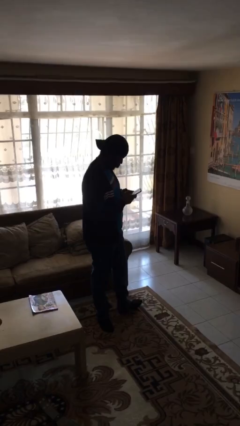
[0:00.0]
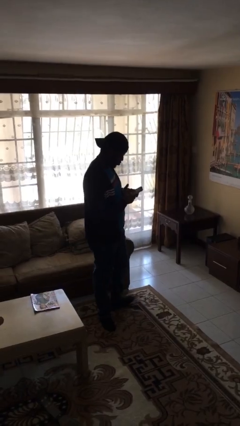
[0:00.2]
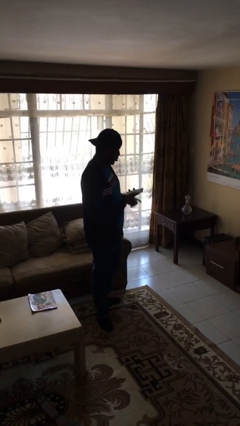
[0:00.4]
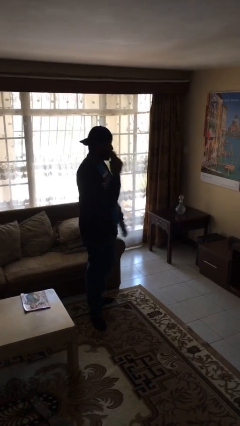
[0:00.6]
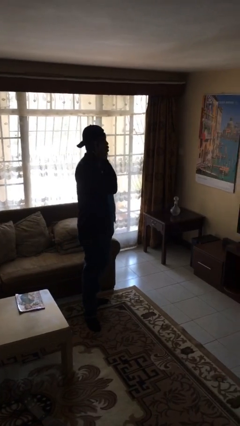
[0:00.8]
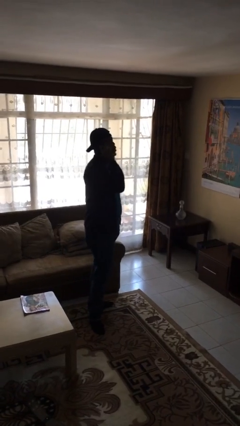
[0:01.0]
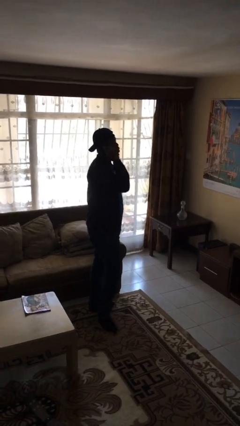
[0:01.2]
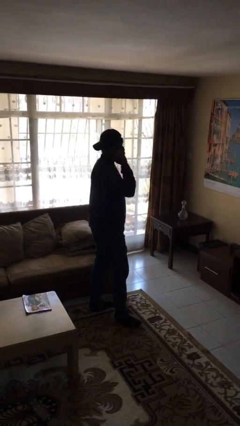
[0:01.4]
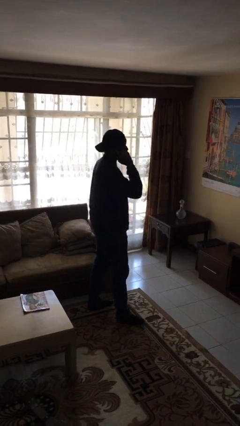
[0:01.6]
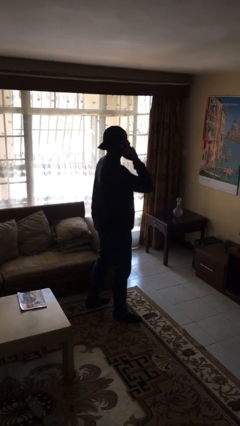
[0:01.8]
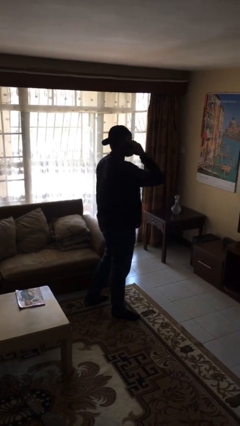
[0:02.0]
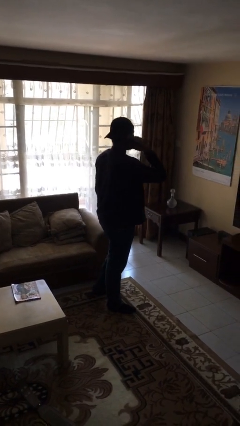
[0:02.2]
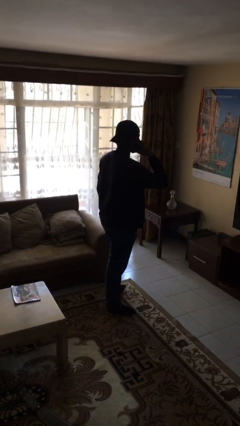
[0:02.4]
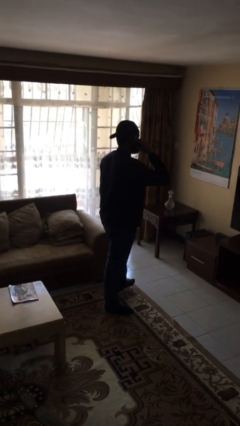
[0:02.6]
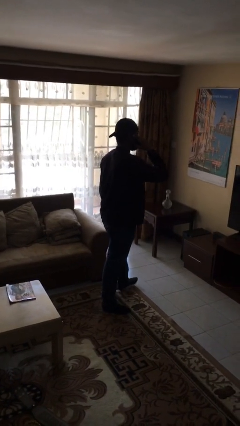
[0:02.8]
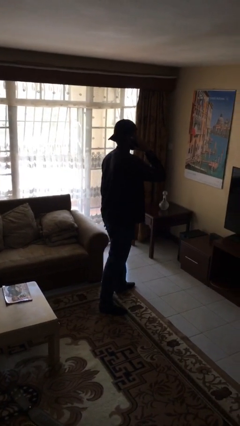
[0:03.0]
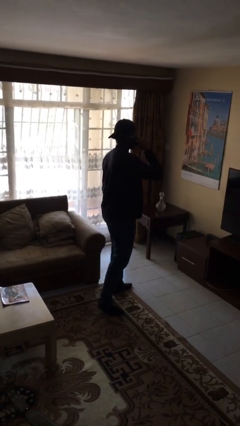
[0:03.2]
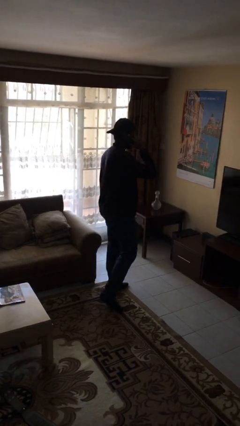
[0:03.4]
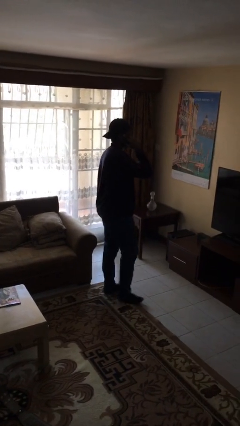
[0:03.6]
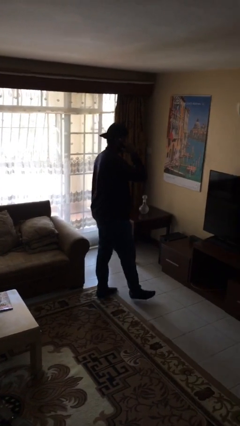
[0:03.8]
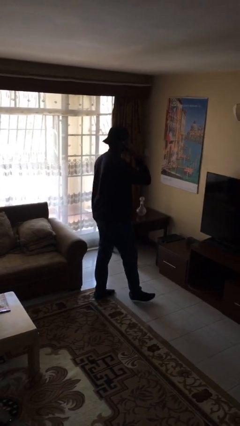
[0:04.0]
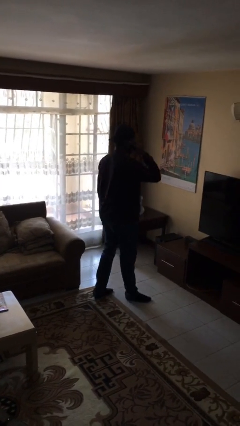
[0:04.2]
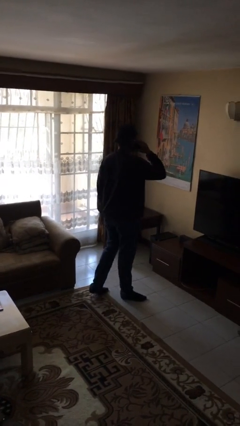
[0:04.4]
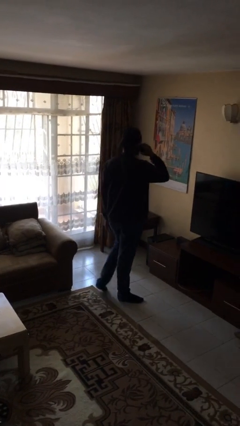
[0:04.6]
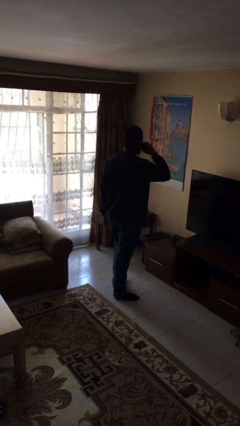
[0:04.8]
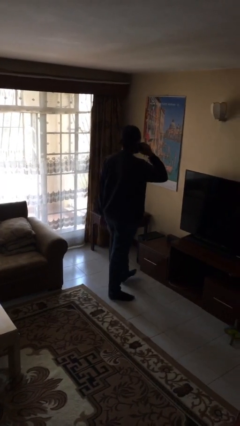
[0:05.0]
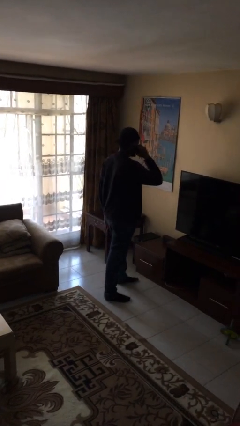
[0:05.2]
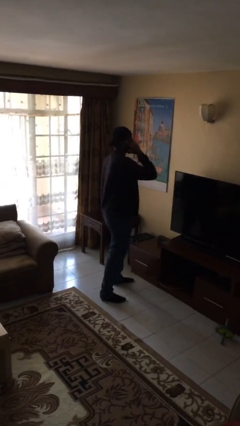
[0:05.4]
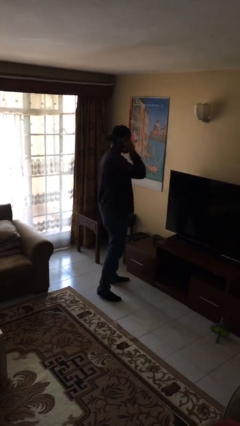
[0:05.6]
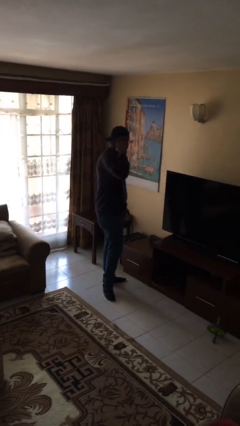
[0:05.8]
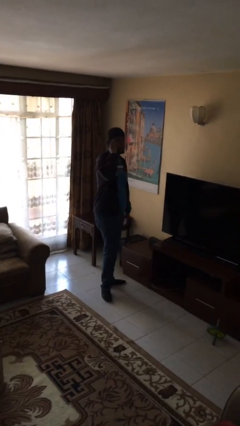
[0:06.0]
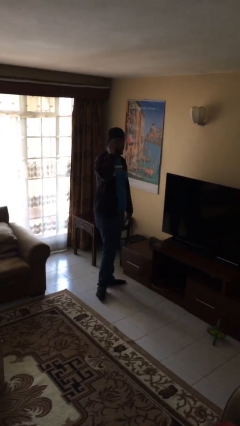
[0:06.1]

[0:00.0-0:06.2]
person talks on phone

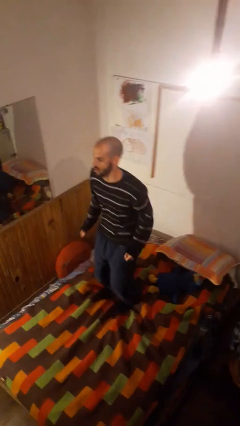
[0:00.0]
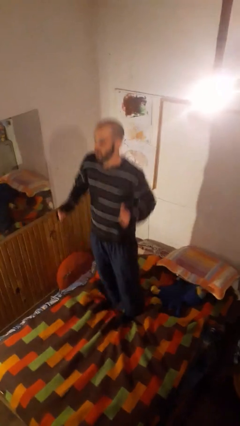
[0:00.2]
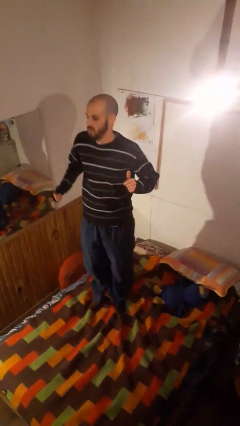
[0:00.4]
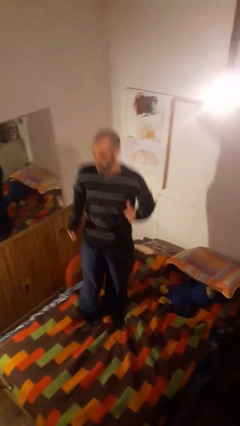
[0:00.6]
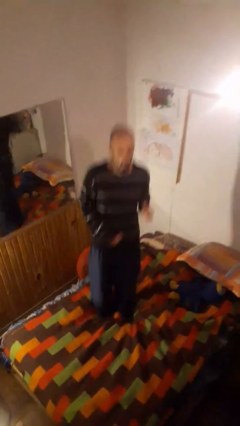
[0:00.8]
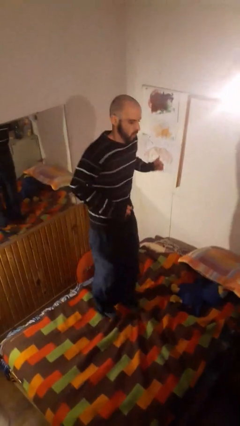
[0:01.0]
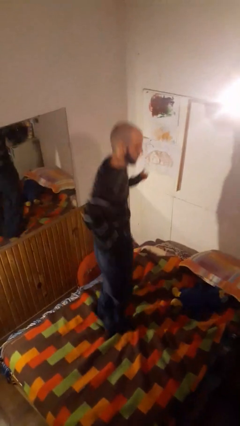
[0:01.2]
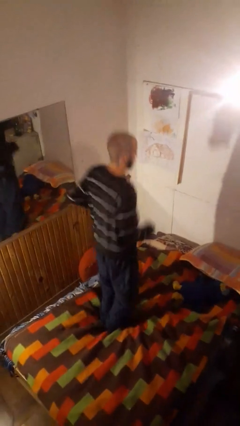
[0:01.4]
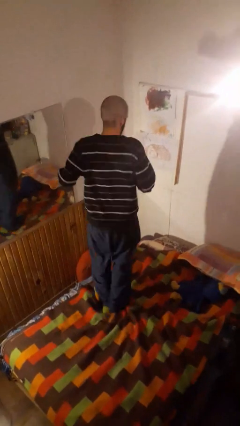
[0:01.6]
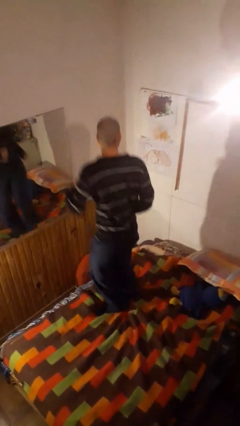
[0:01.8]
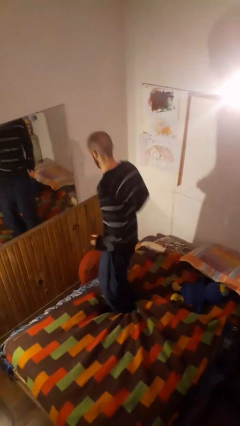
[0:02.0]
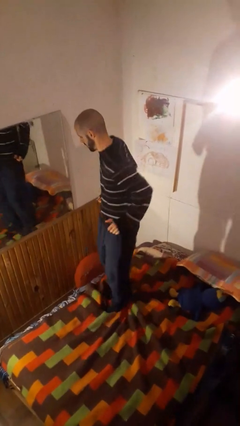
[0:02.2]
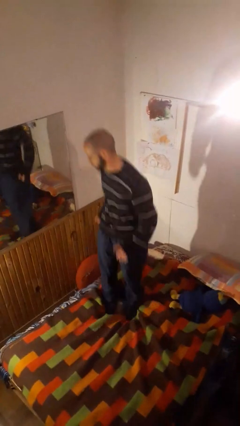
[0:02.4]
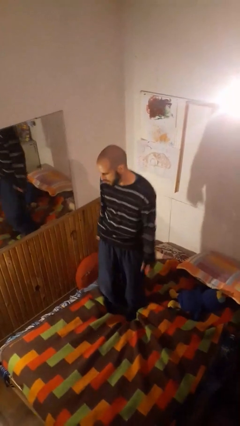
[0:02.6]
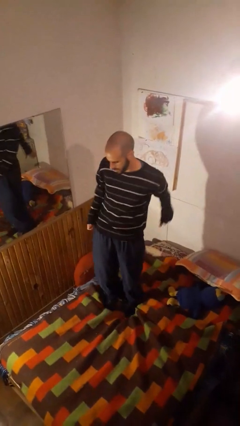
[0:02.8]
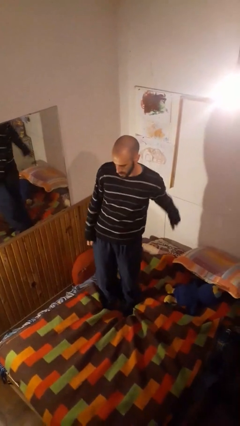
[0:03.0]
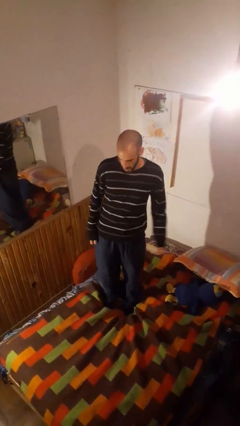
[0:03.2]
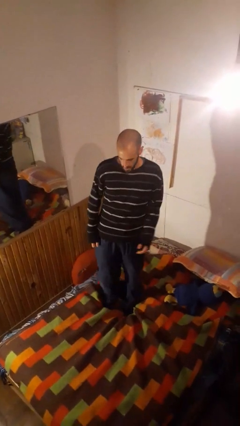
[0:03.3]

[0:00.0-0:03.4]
person jumps on bed

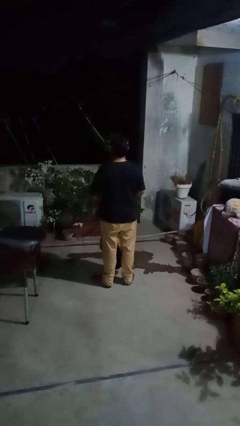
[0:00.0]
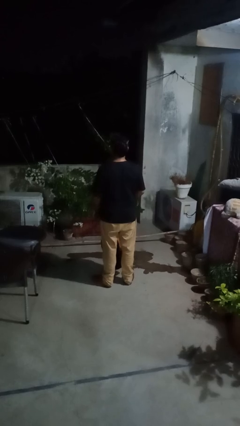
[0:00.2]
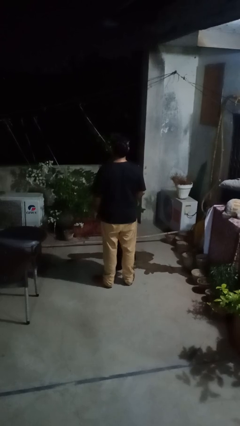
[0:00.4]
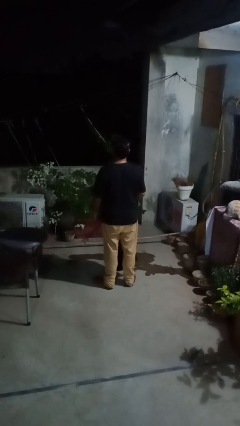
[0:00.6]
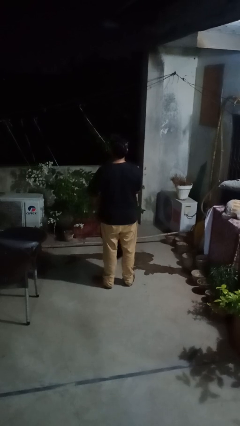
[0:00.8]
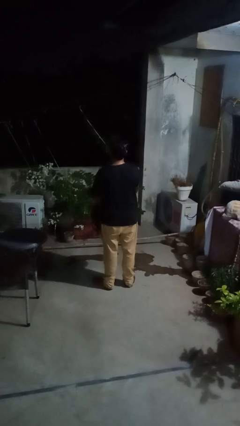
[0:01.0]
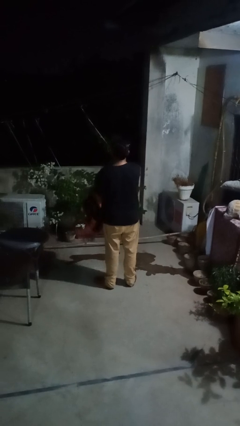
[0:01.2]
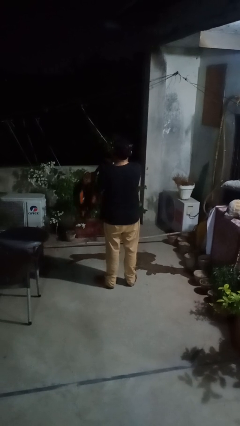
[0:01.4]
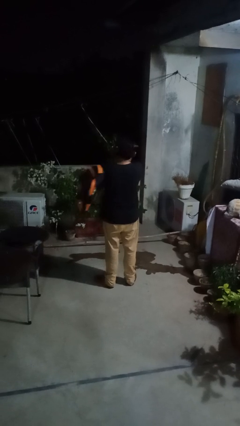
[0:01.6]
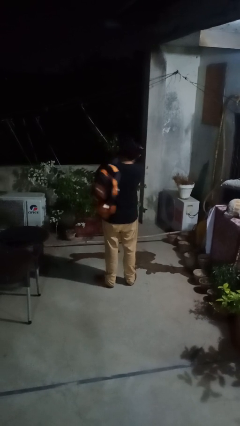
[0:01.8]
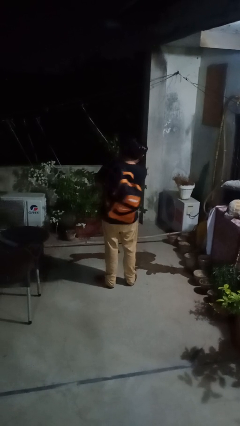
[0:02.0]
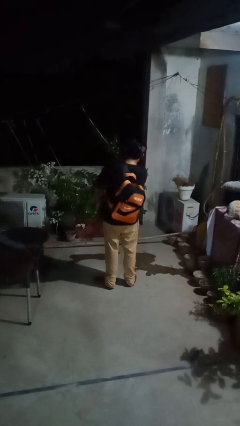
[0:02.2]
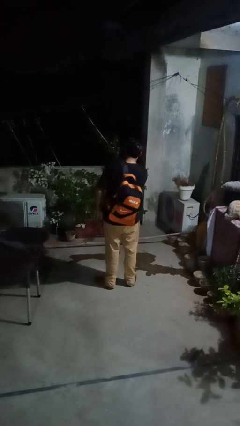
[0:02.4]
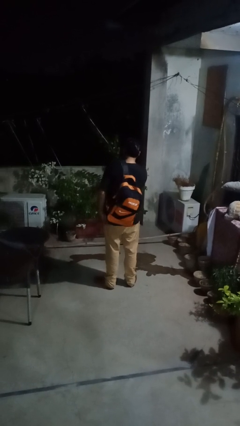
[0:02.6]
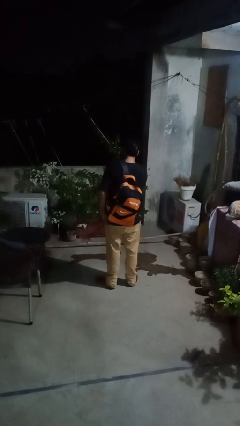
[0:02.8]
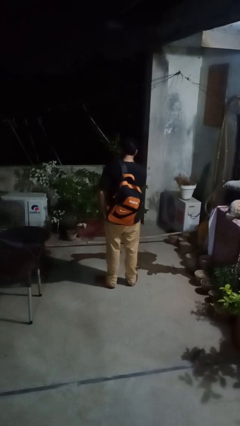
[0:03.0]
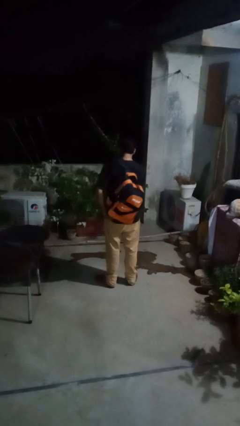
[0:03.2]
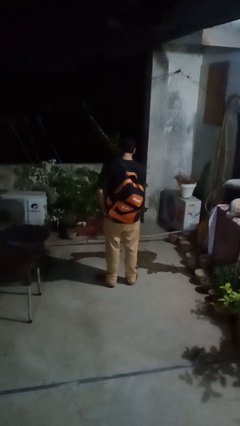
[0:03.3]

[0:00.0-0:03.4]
person puts on backpack

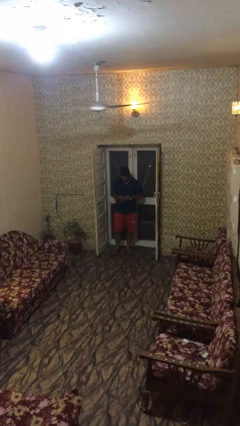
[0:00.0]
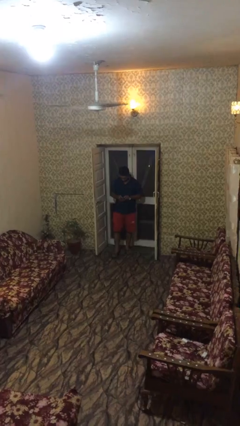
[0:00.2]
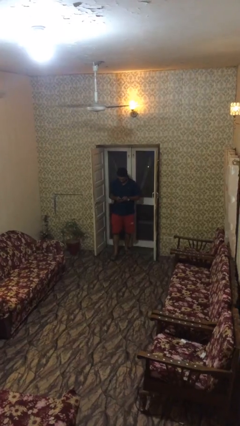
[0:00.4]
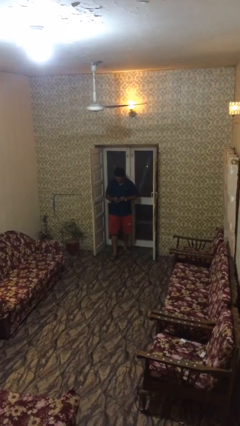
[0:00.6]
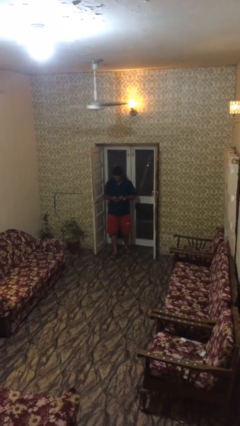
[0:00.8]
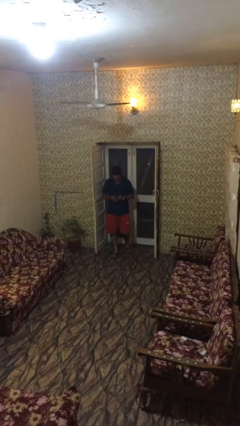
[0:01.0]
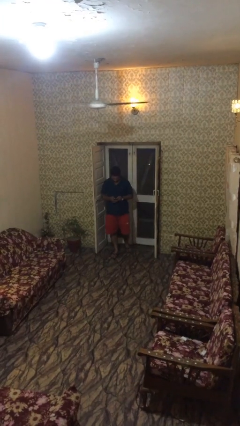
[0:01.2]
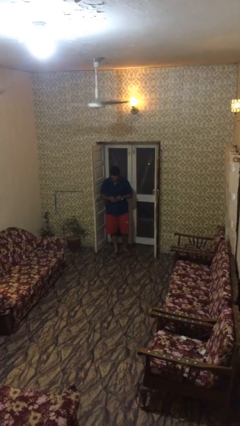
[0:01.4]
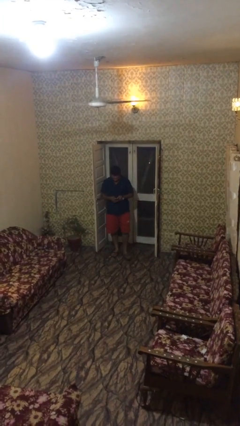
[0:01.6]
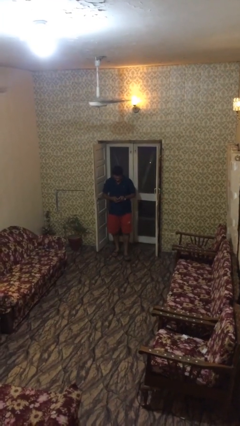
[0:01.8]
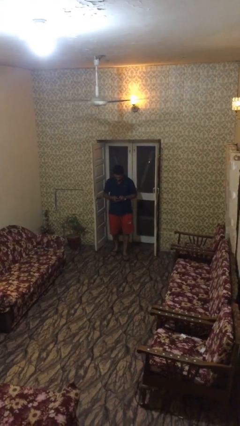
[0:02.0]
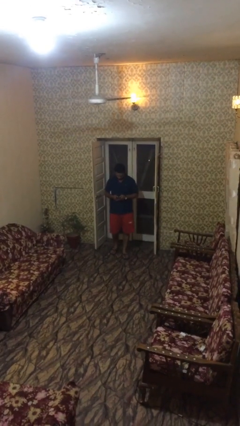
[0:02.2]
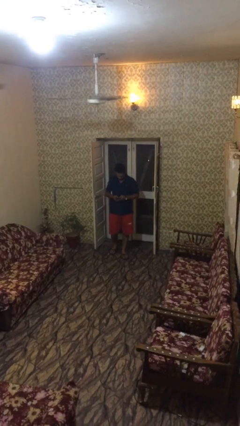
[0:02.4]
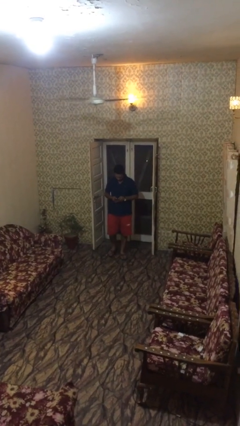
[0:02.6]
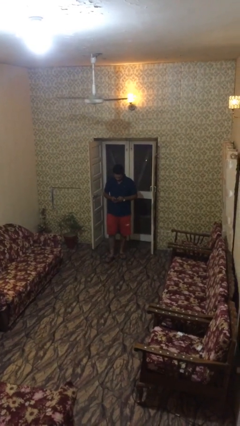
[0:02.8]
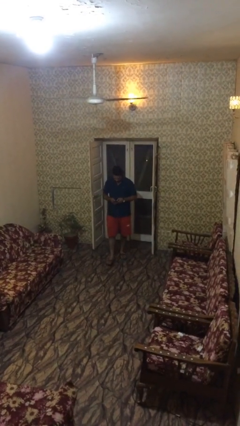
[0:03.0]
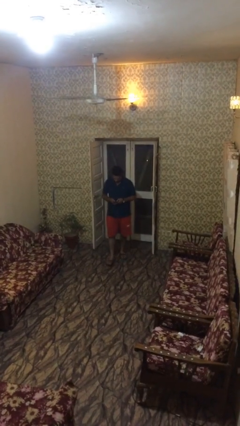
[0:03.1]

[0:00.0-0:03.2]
person texts on phone

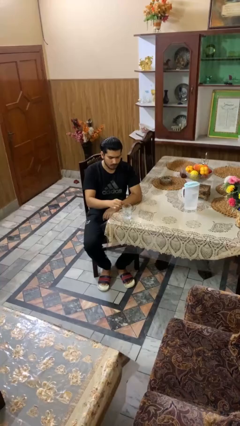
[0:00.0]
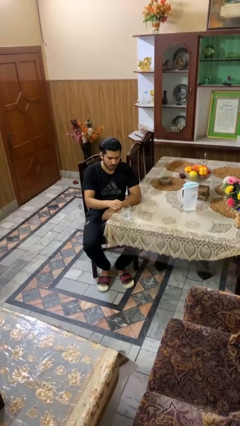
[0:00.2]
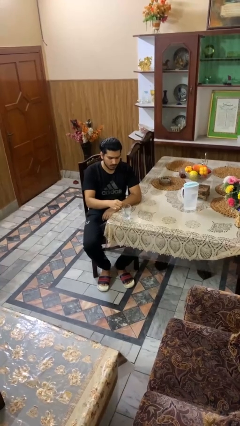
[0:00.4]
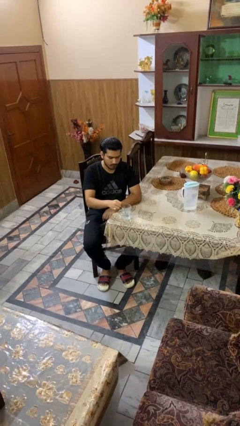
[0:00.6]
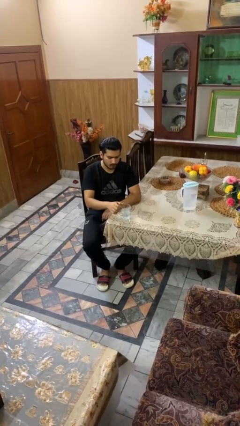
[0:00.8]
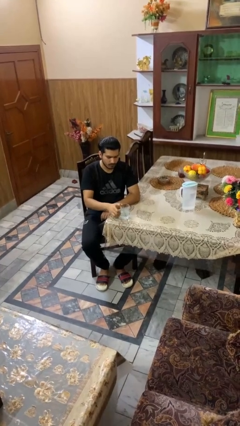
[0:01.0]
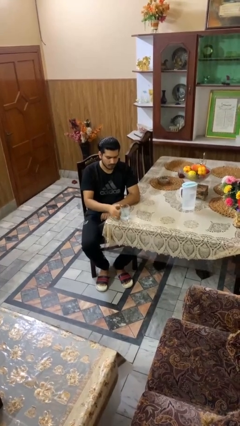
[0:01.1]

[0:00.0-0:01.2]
person stirs mug

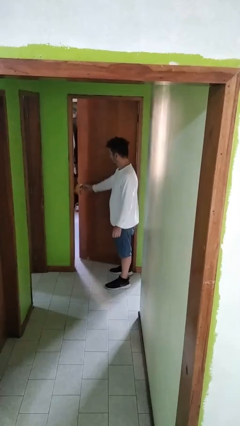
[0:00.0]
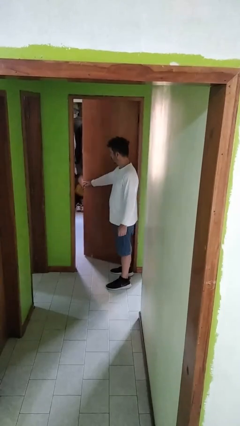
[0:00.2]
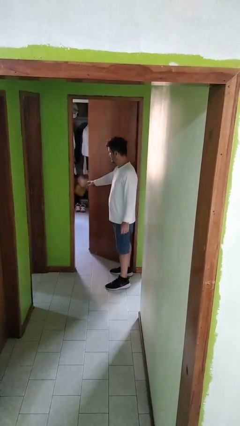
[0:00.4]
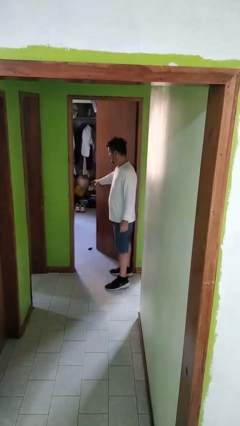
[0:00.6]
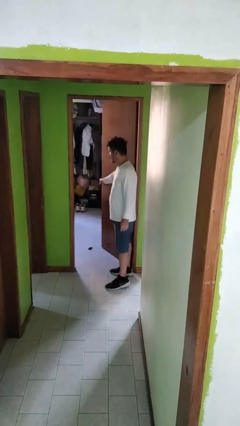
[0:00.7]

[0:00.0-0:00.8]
person opens facility door
